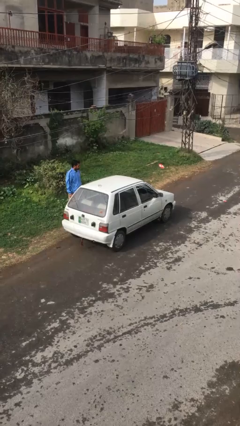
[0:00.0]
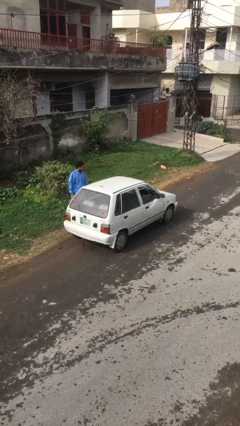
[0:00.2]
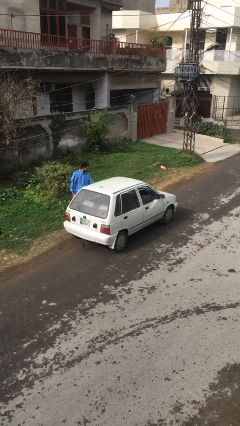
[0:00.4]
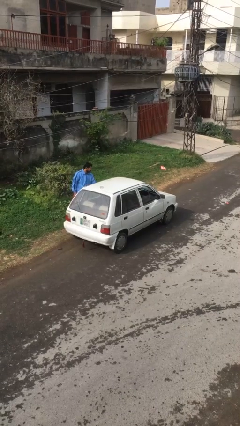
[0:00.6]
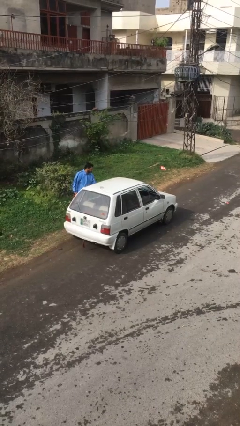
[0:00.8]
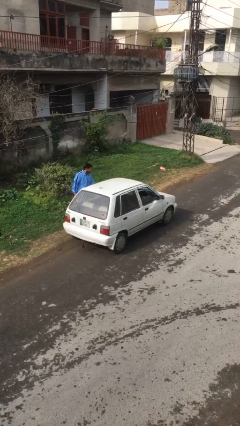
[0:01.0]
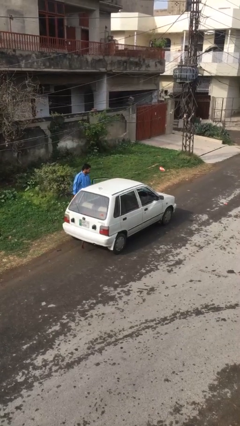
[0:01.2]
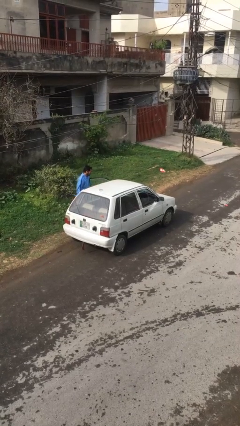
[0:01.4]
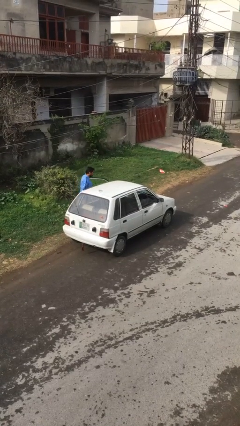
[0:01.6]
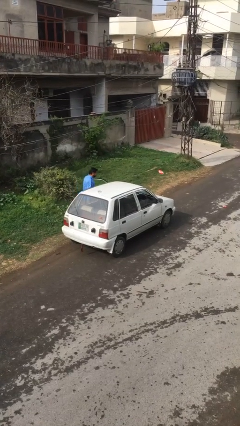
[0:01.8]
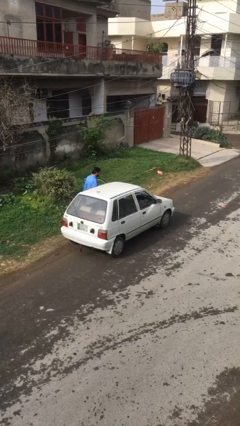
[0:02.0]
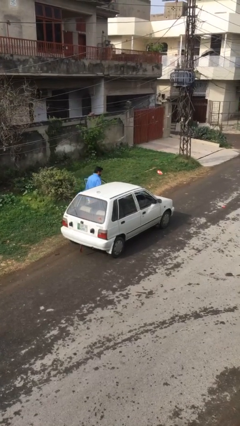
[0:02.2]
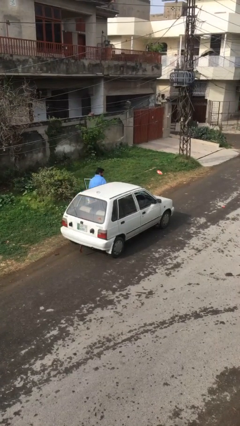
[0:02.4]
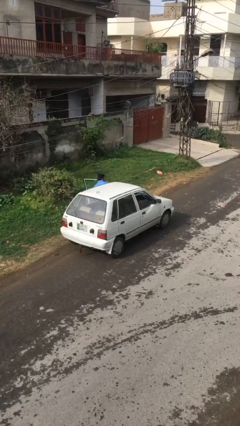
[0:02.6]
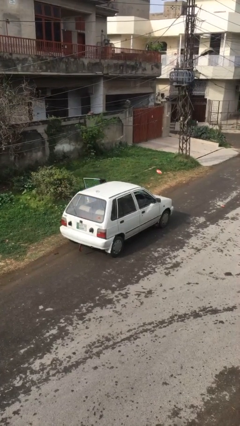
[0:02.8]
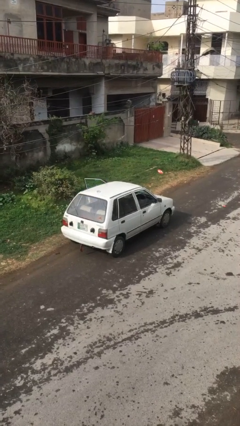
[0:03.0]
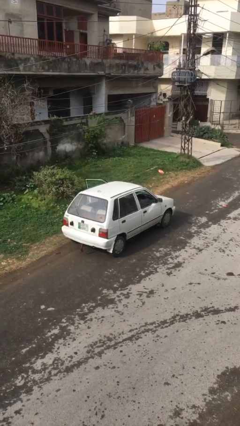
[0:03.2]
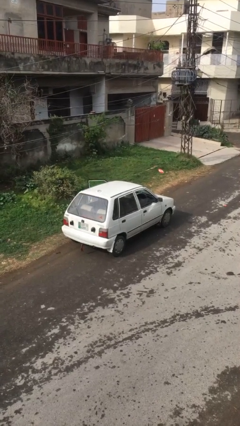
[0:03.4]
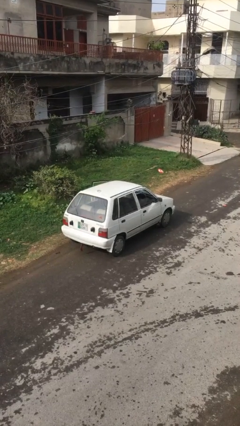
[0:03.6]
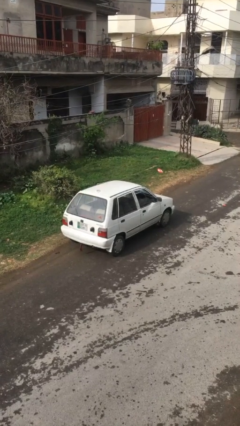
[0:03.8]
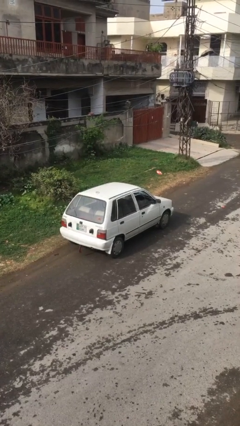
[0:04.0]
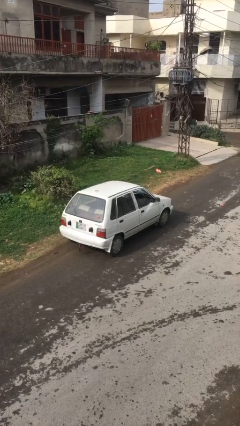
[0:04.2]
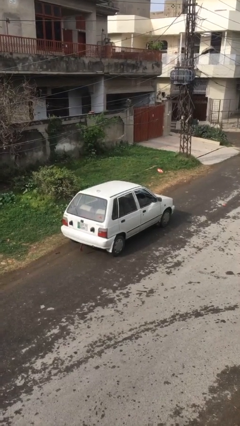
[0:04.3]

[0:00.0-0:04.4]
car picks up person

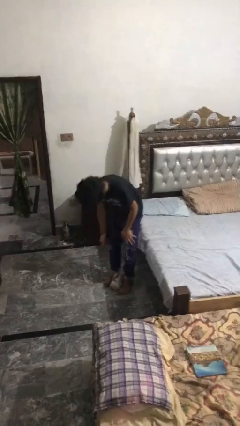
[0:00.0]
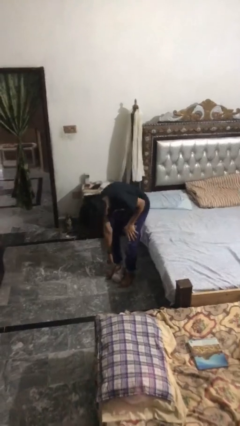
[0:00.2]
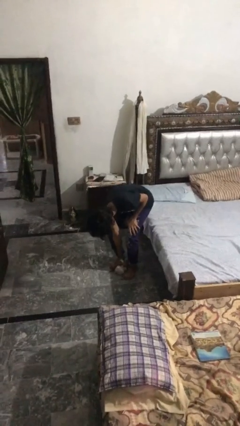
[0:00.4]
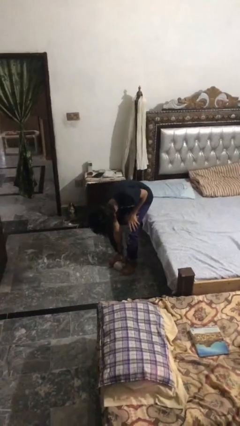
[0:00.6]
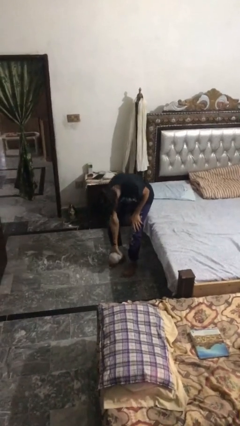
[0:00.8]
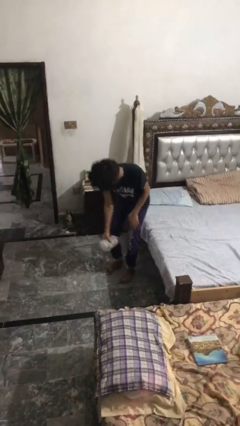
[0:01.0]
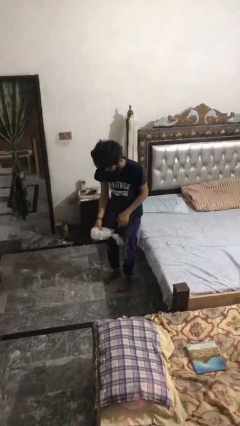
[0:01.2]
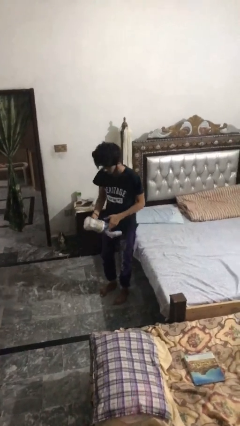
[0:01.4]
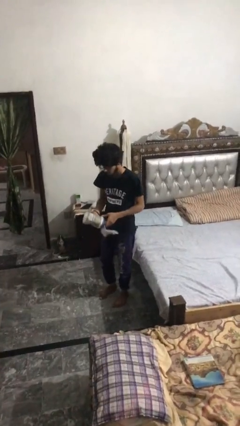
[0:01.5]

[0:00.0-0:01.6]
person picks up object from floor

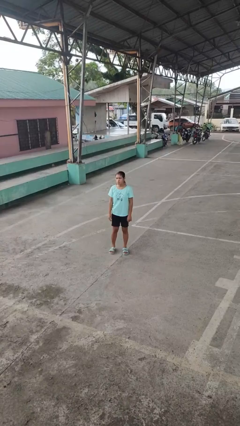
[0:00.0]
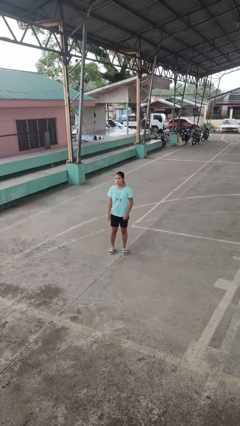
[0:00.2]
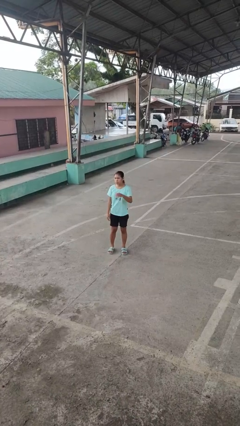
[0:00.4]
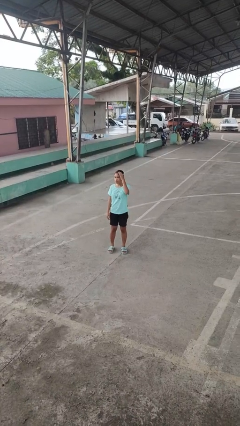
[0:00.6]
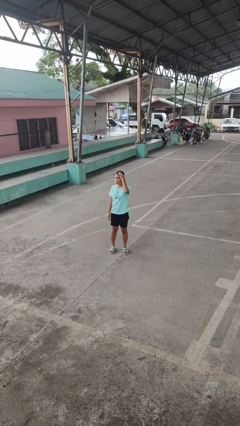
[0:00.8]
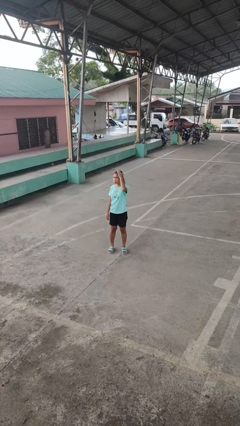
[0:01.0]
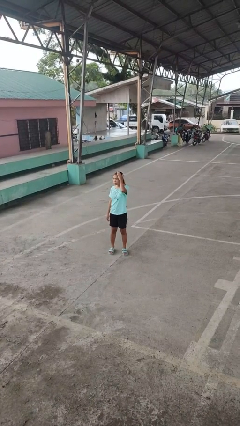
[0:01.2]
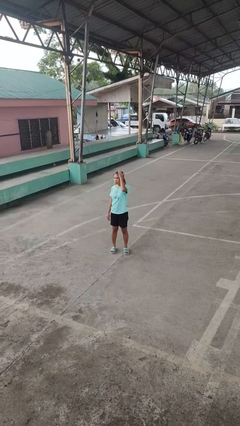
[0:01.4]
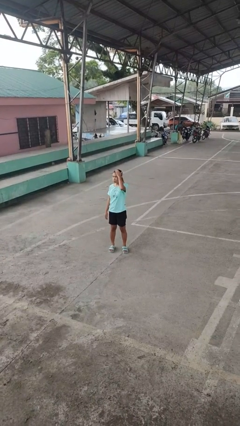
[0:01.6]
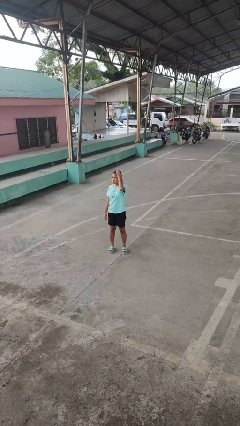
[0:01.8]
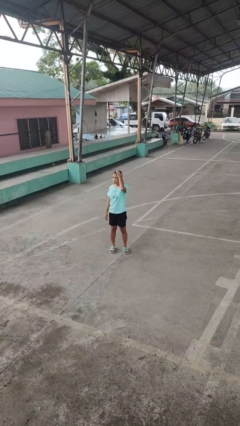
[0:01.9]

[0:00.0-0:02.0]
person pats head

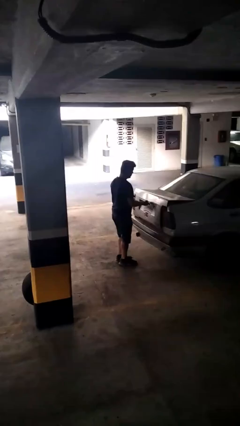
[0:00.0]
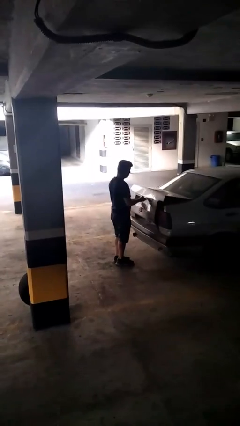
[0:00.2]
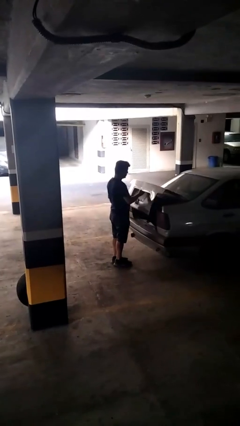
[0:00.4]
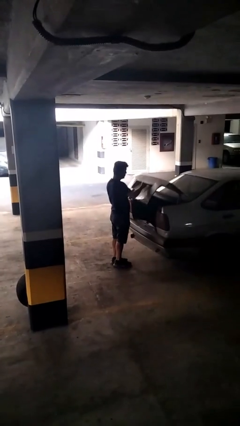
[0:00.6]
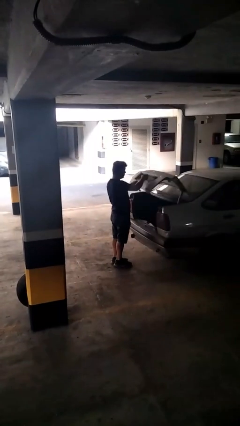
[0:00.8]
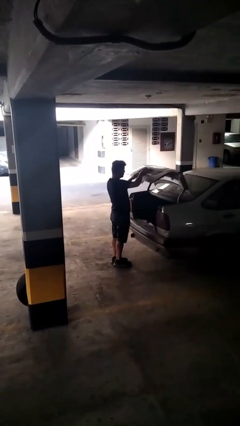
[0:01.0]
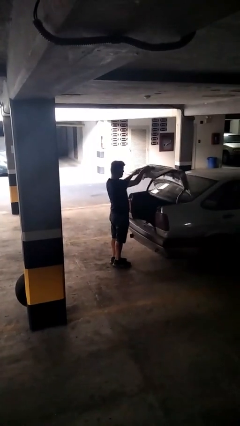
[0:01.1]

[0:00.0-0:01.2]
person opens car trunk

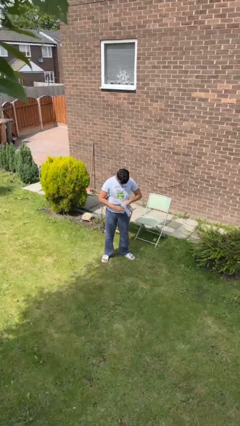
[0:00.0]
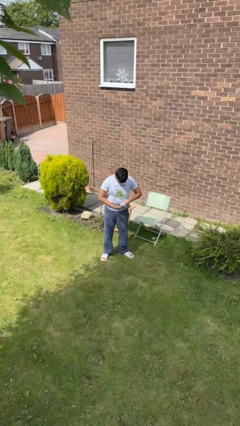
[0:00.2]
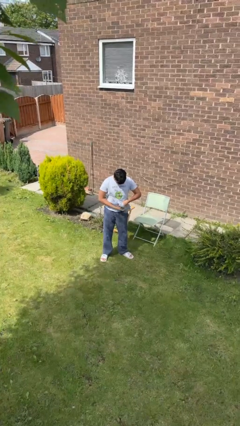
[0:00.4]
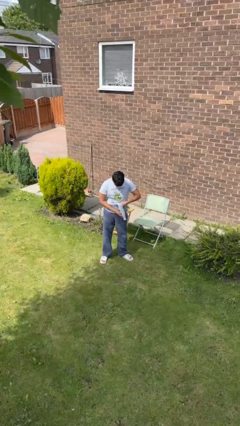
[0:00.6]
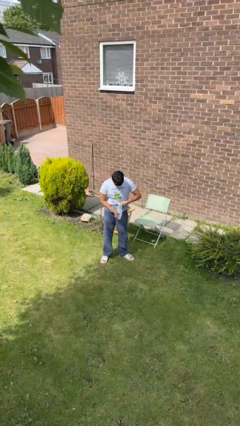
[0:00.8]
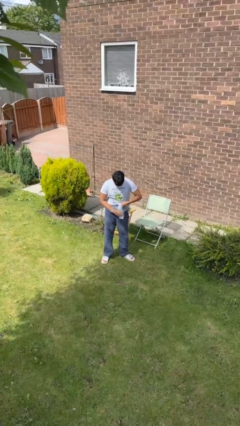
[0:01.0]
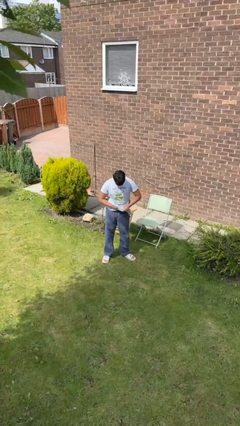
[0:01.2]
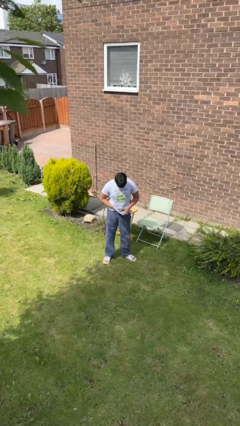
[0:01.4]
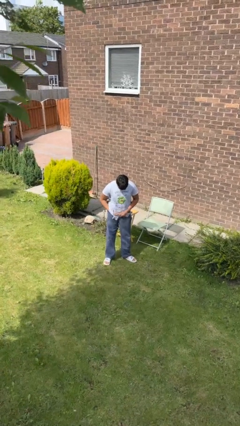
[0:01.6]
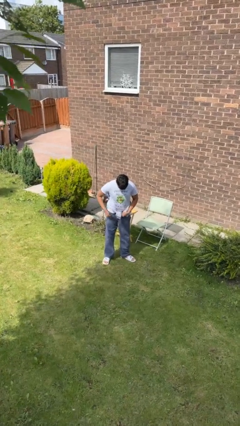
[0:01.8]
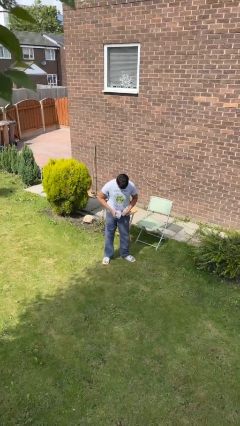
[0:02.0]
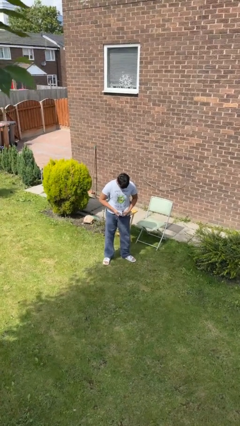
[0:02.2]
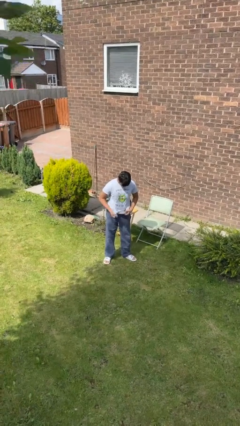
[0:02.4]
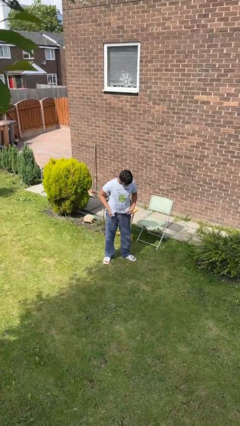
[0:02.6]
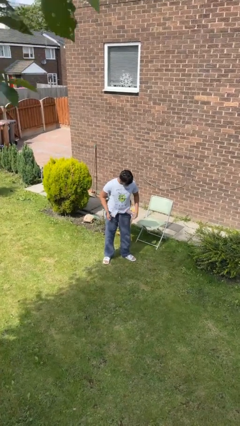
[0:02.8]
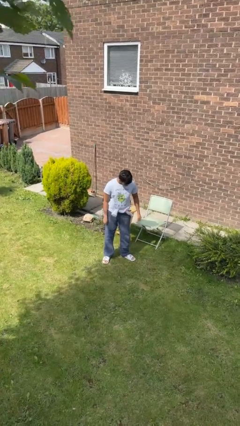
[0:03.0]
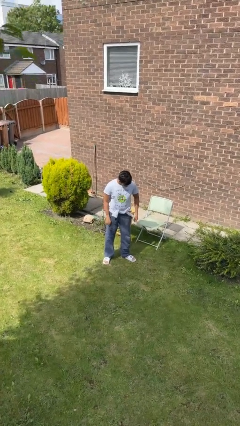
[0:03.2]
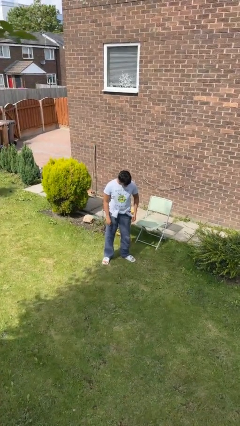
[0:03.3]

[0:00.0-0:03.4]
person ties jacket around waist

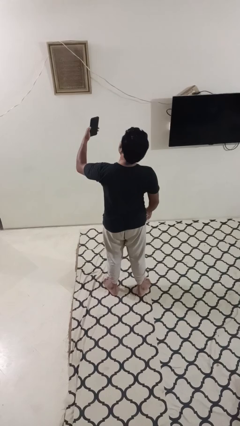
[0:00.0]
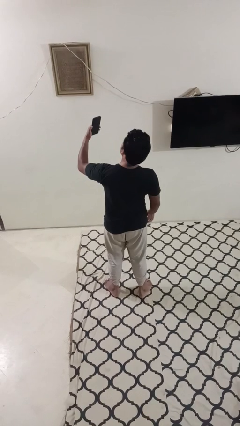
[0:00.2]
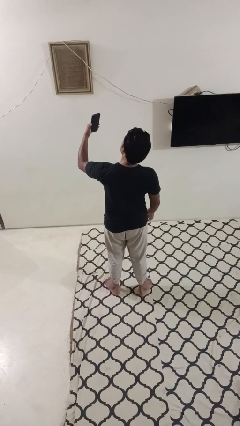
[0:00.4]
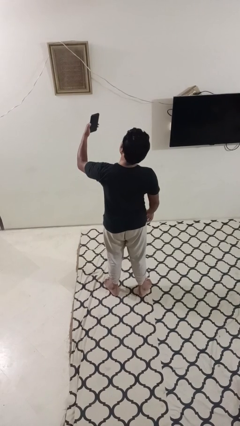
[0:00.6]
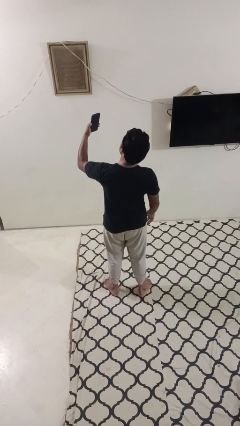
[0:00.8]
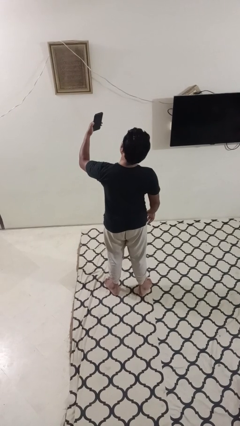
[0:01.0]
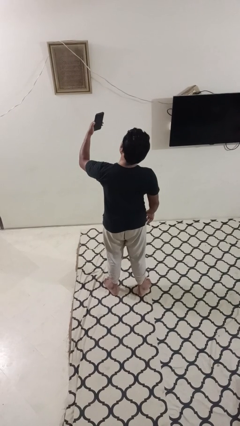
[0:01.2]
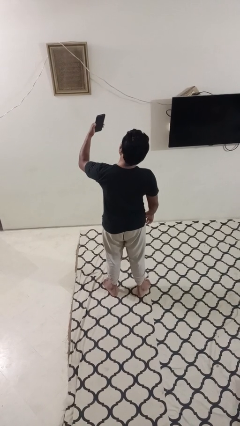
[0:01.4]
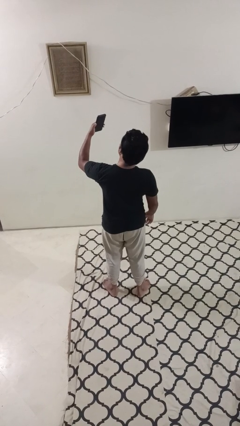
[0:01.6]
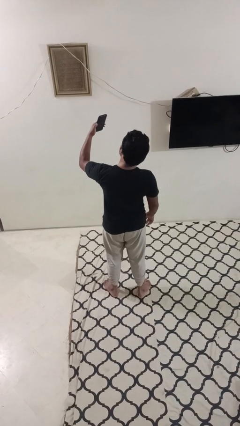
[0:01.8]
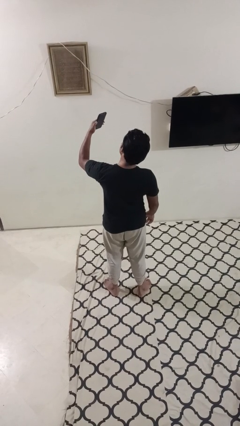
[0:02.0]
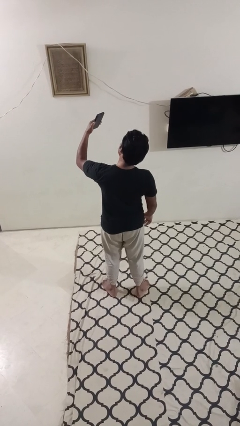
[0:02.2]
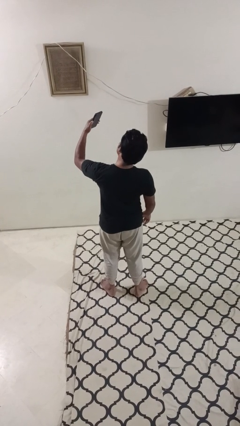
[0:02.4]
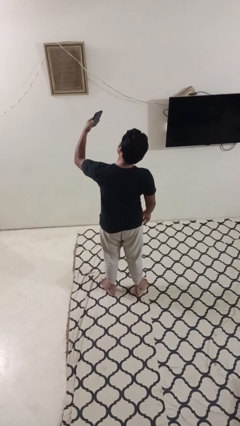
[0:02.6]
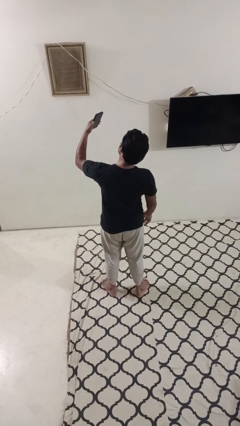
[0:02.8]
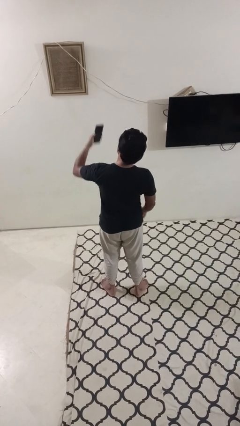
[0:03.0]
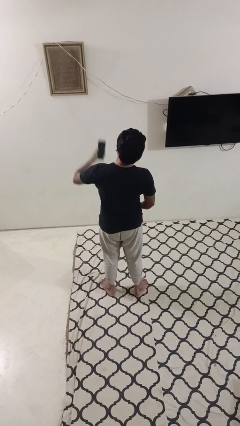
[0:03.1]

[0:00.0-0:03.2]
person takes selfie

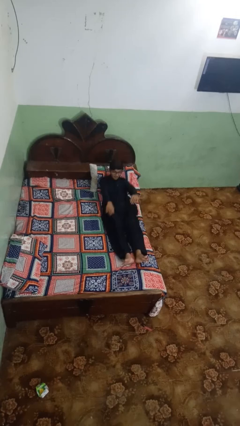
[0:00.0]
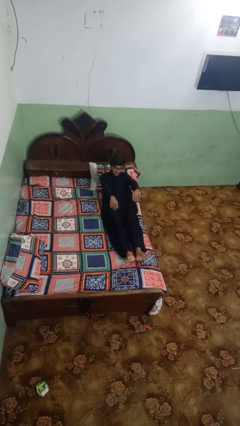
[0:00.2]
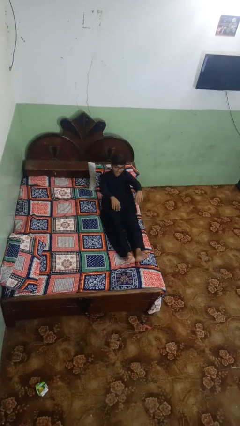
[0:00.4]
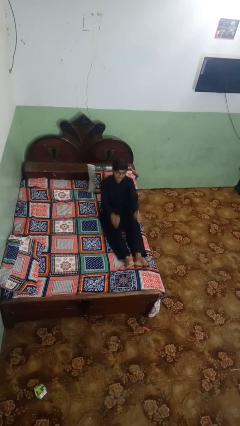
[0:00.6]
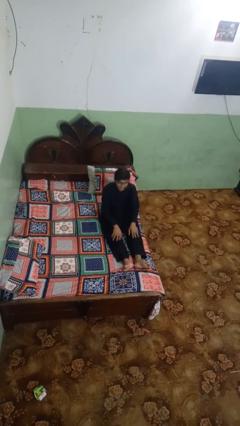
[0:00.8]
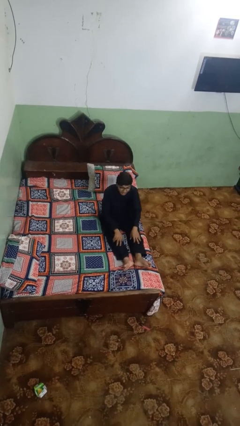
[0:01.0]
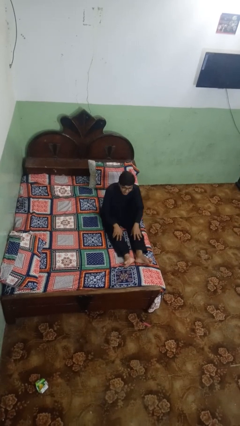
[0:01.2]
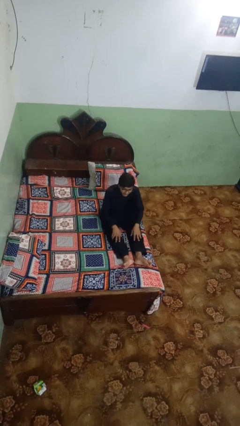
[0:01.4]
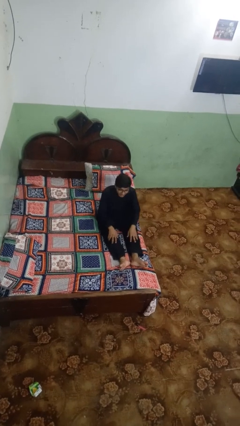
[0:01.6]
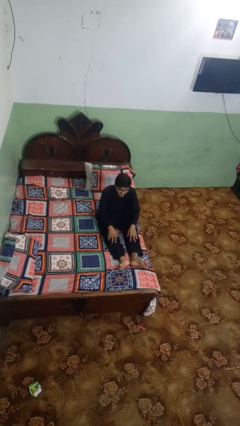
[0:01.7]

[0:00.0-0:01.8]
person stands up
